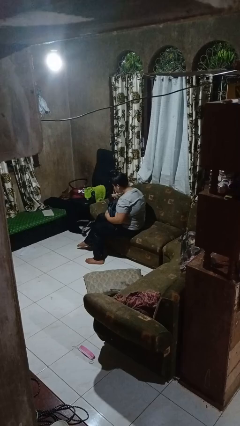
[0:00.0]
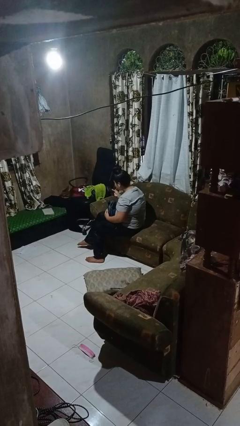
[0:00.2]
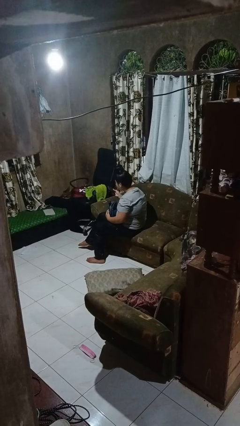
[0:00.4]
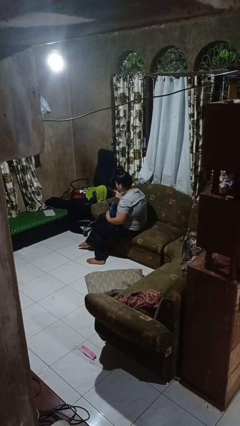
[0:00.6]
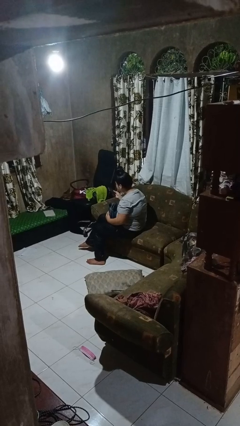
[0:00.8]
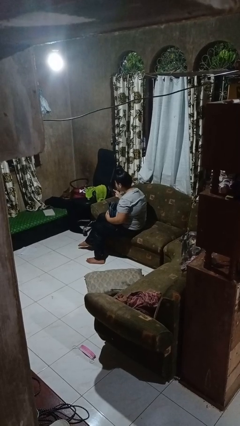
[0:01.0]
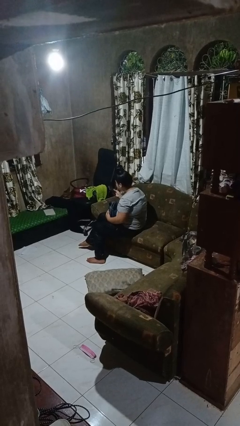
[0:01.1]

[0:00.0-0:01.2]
person takes object from purse

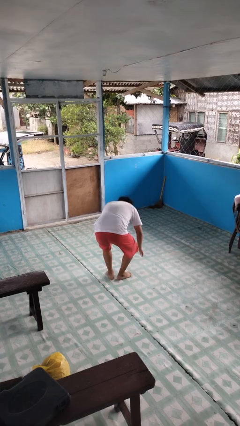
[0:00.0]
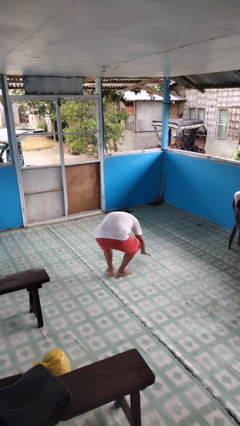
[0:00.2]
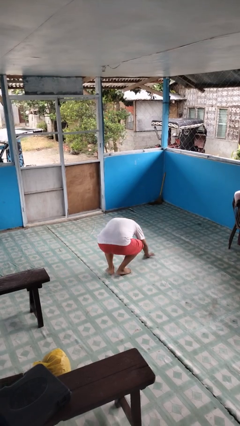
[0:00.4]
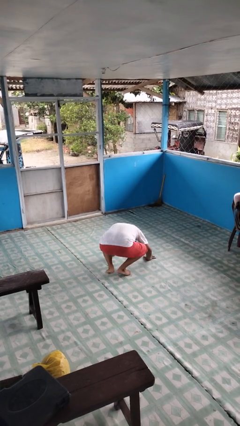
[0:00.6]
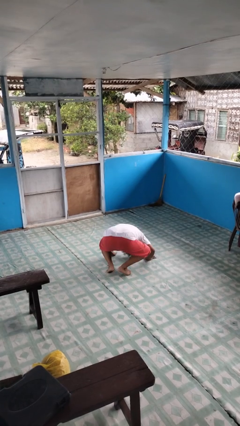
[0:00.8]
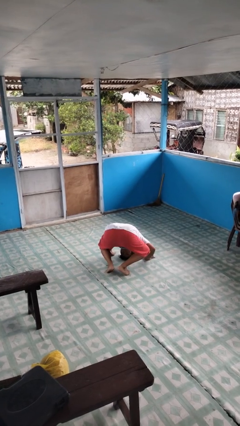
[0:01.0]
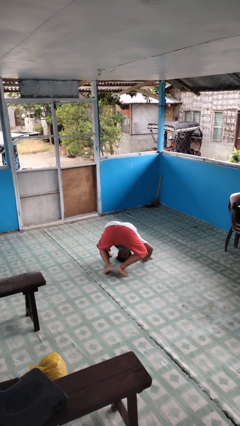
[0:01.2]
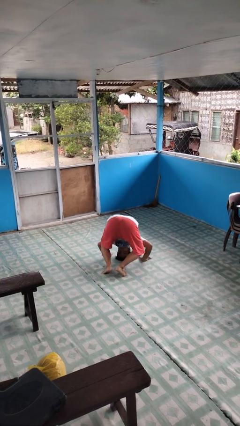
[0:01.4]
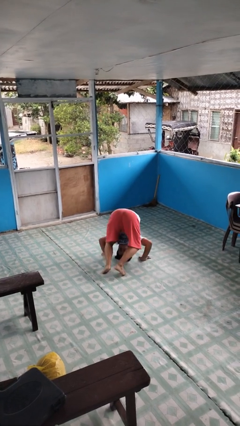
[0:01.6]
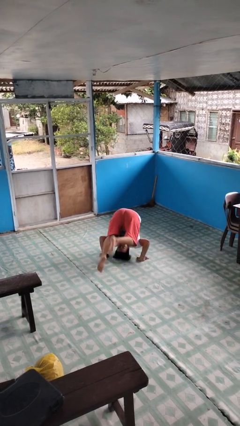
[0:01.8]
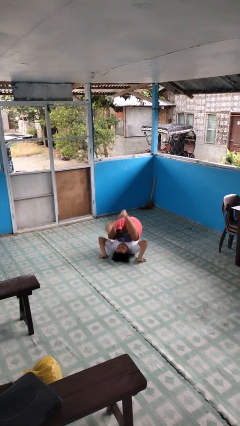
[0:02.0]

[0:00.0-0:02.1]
person somersaults

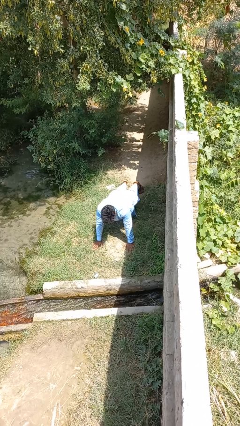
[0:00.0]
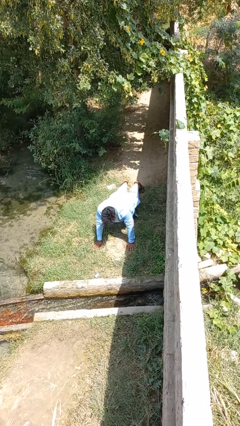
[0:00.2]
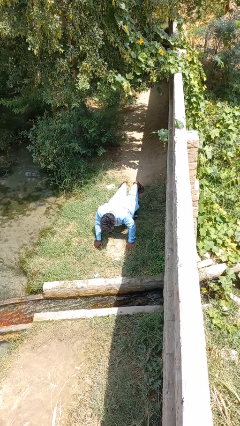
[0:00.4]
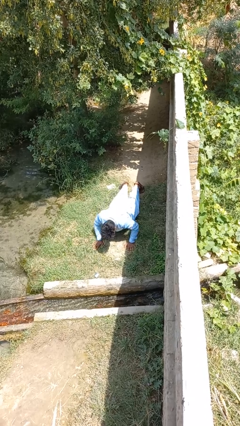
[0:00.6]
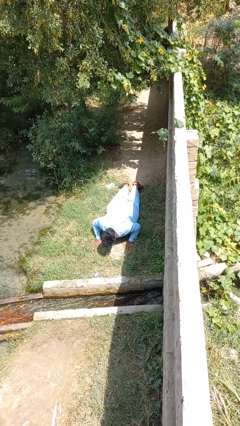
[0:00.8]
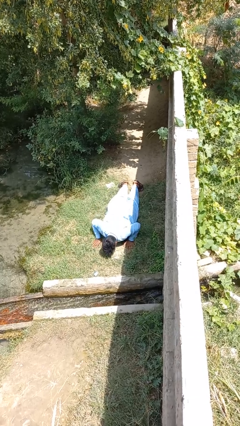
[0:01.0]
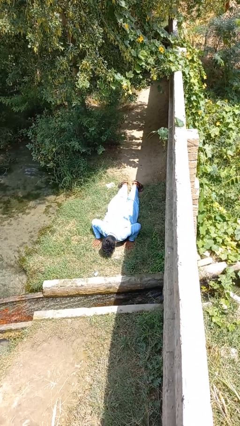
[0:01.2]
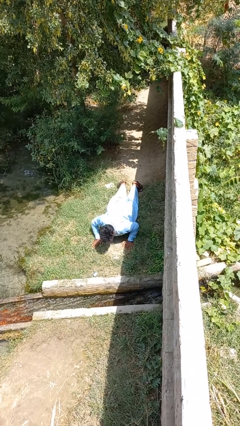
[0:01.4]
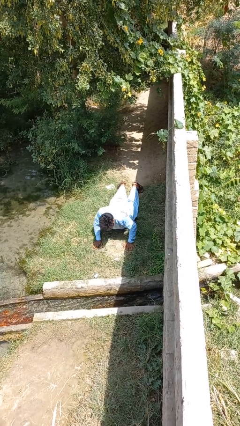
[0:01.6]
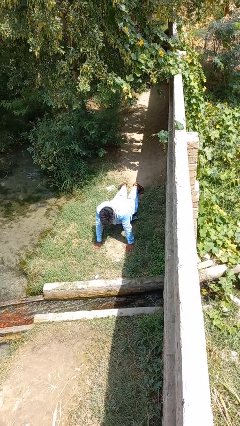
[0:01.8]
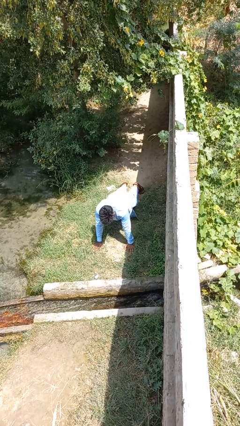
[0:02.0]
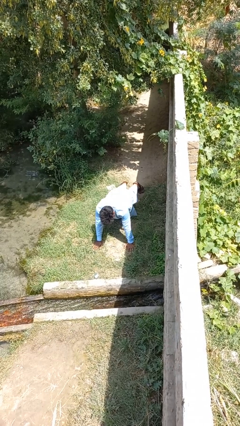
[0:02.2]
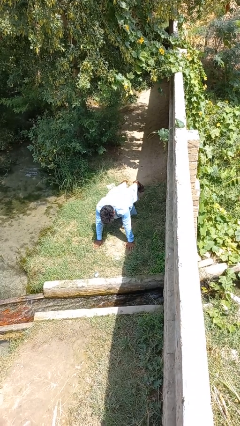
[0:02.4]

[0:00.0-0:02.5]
person exercises with pushup

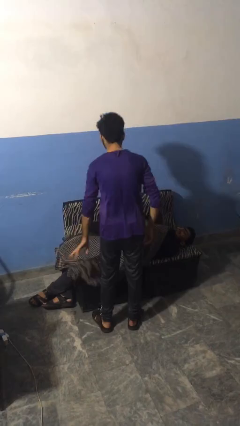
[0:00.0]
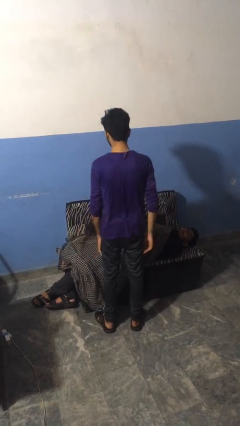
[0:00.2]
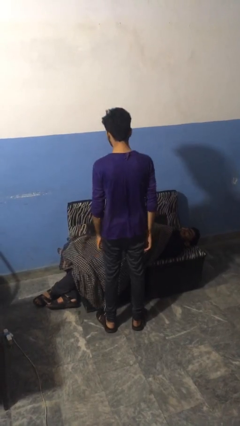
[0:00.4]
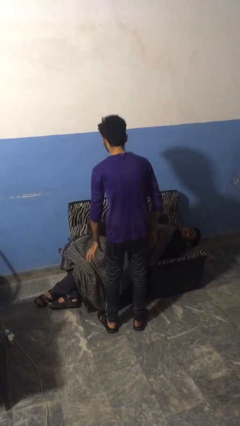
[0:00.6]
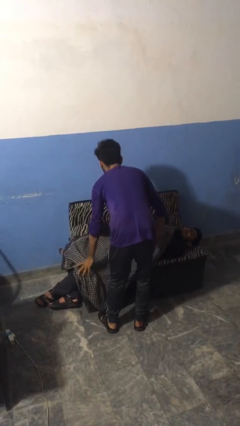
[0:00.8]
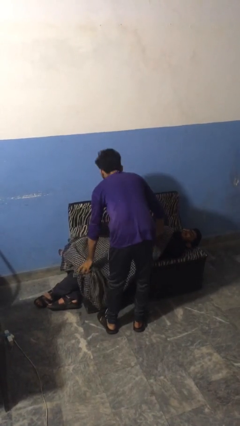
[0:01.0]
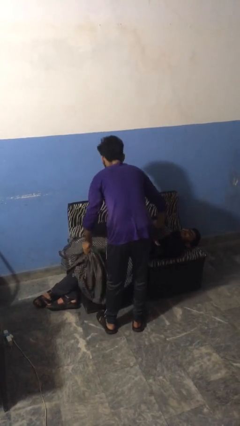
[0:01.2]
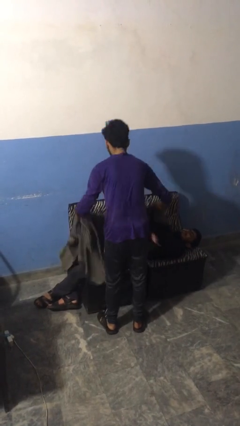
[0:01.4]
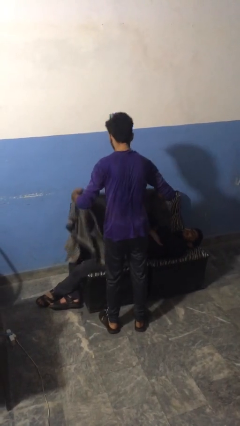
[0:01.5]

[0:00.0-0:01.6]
person uncovers friend with blanket

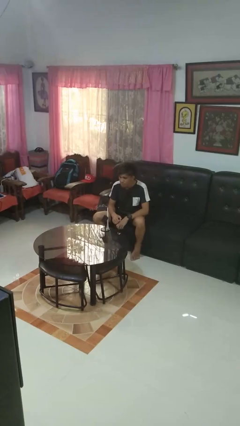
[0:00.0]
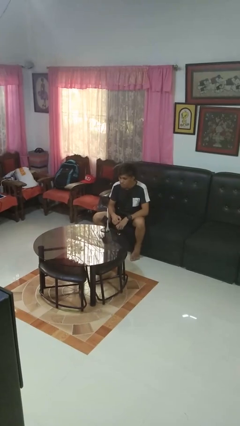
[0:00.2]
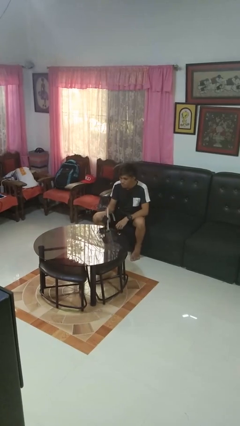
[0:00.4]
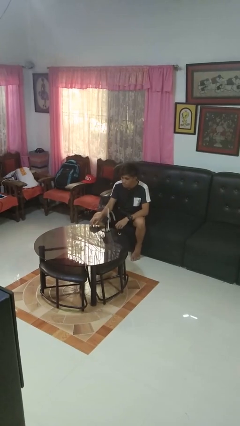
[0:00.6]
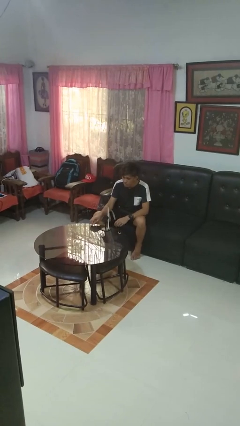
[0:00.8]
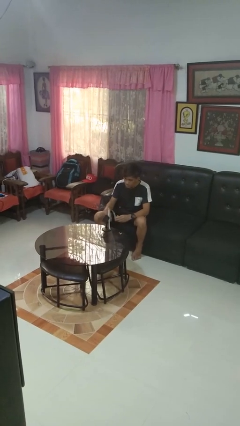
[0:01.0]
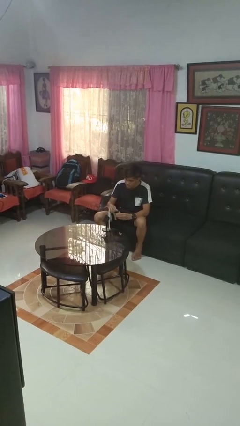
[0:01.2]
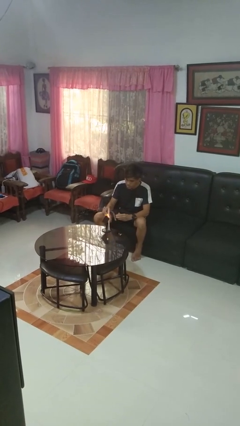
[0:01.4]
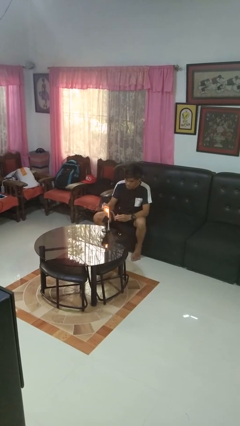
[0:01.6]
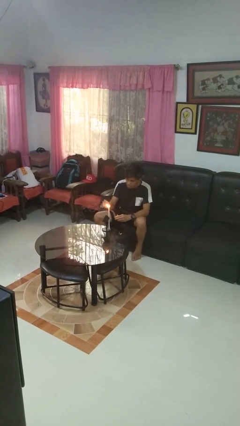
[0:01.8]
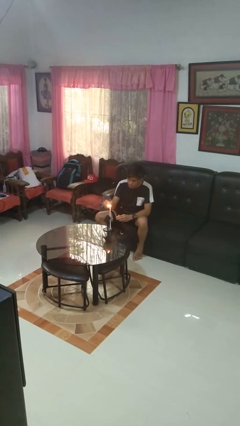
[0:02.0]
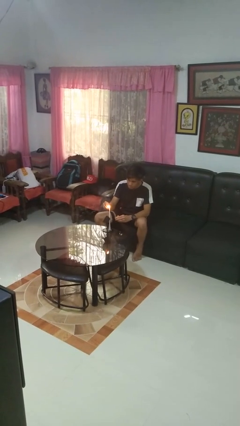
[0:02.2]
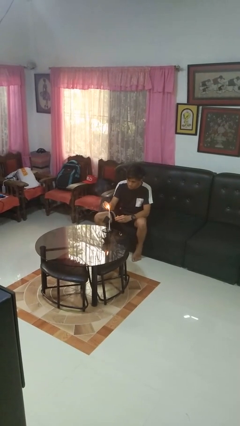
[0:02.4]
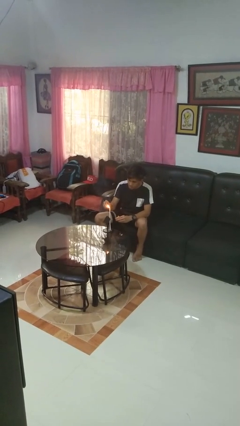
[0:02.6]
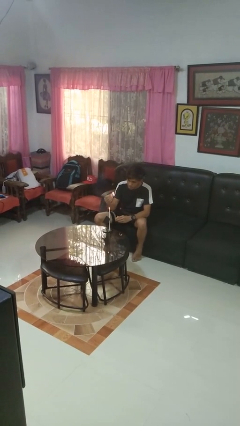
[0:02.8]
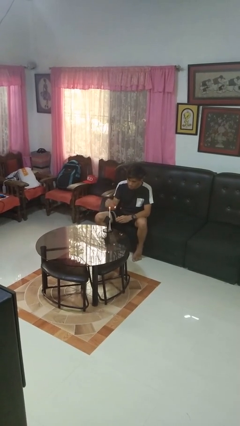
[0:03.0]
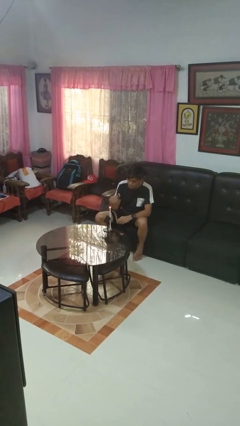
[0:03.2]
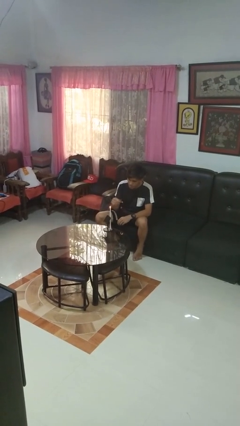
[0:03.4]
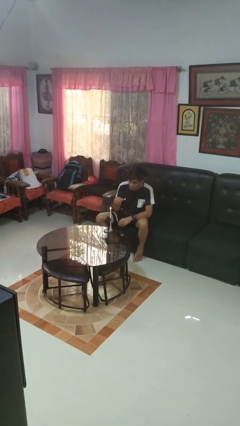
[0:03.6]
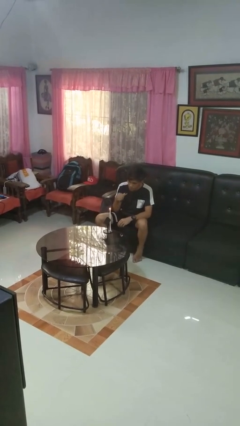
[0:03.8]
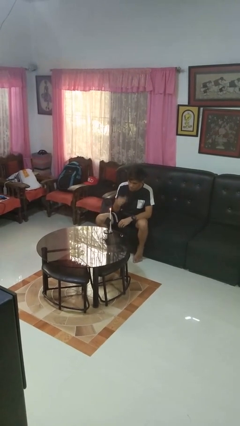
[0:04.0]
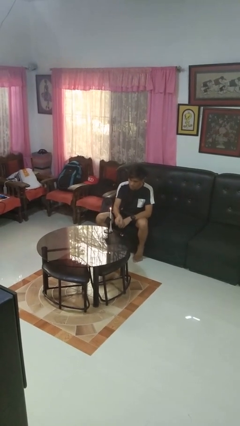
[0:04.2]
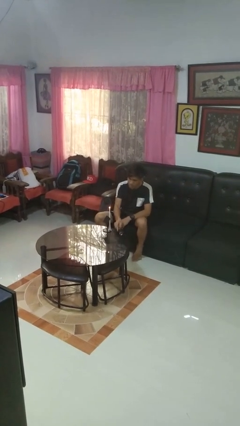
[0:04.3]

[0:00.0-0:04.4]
person lights candle

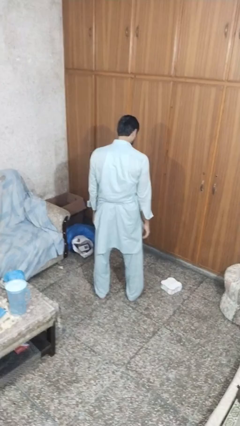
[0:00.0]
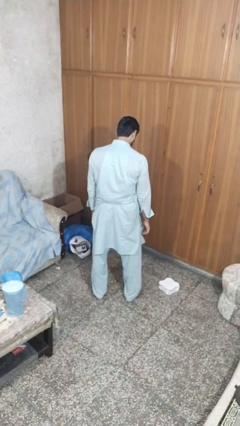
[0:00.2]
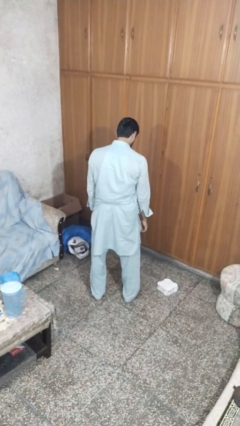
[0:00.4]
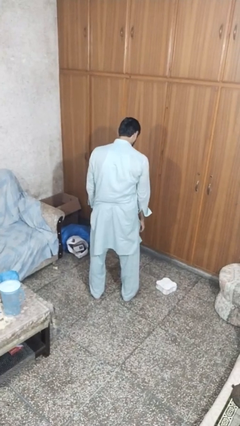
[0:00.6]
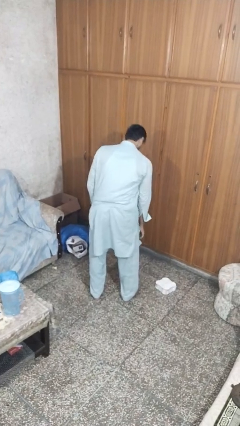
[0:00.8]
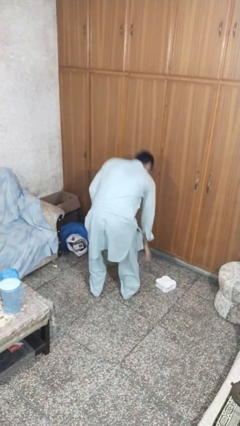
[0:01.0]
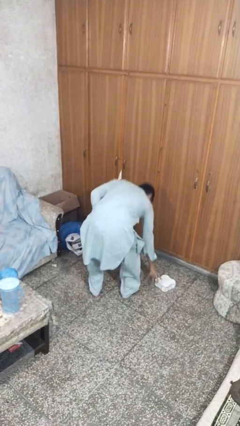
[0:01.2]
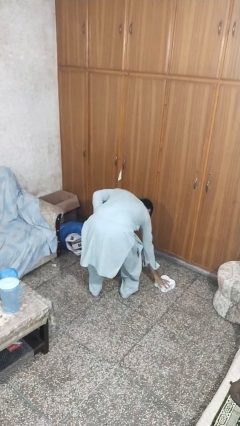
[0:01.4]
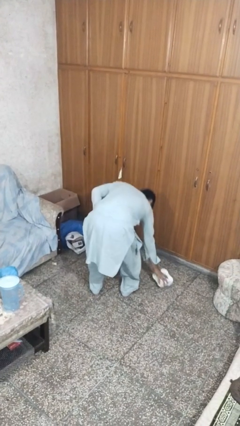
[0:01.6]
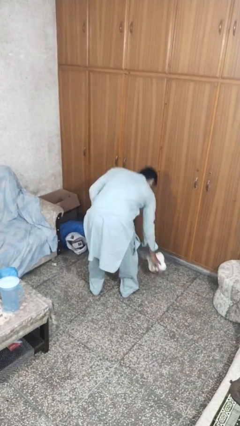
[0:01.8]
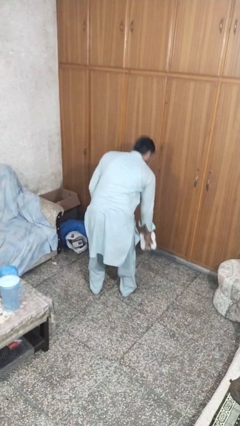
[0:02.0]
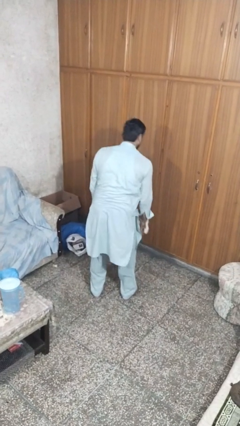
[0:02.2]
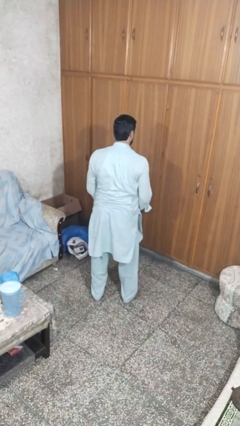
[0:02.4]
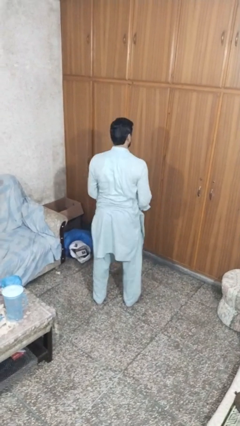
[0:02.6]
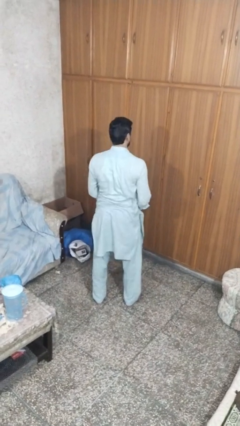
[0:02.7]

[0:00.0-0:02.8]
person picks up object from floor

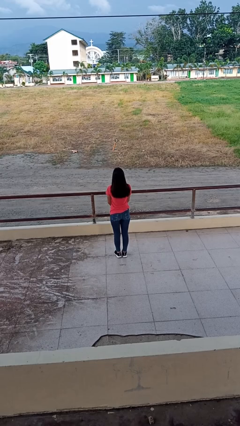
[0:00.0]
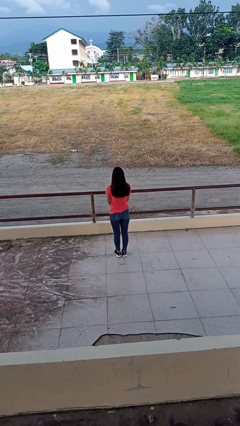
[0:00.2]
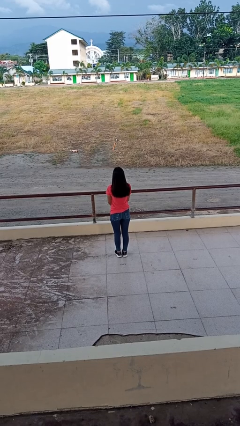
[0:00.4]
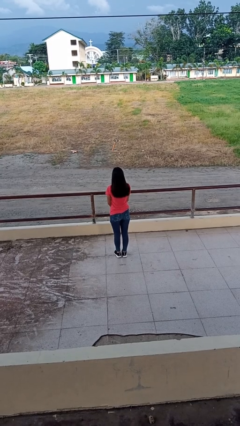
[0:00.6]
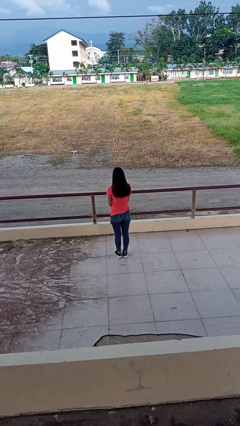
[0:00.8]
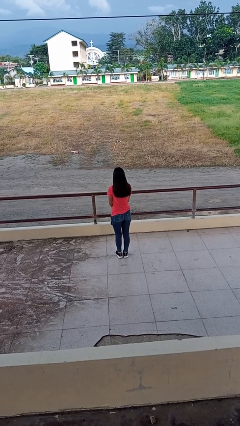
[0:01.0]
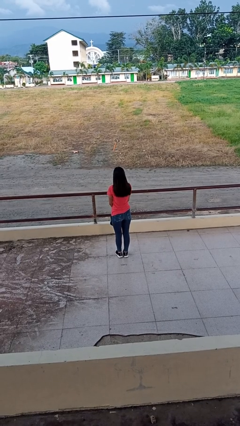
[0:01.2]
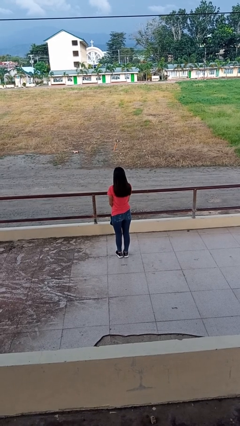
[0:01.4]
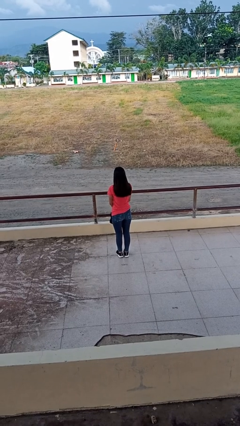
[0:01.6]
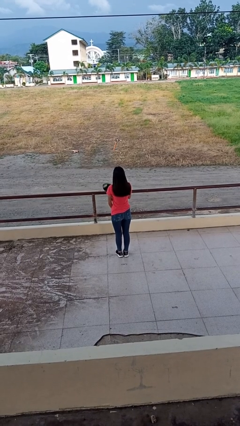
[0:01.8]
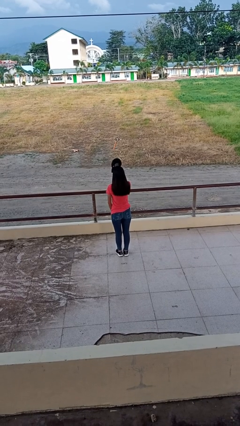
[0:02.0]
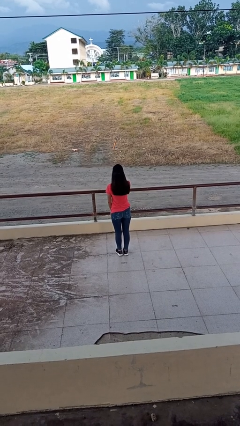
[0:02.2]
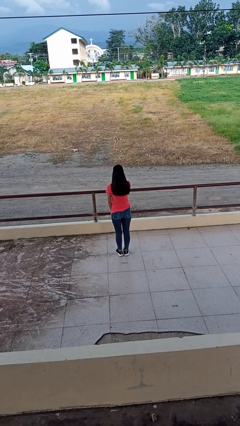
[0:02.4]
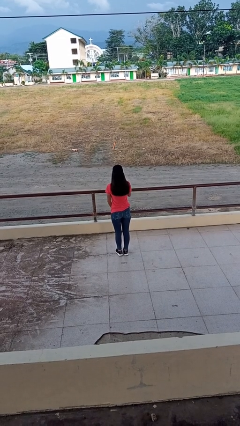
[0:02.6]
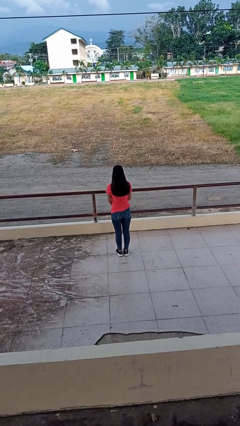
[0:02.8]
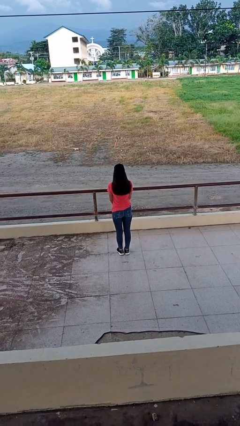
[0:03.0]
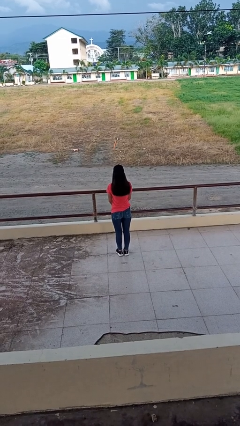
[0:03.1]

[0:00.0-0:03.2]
person puts on hat
